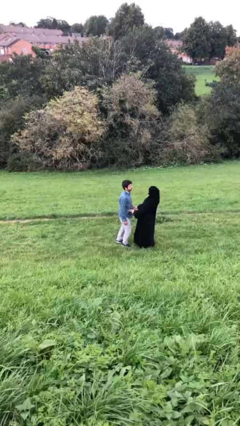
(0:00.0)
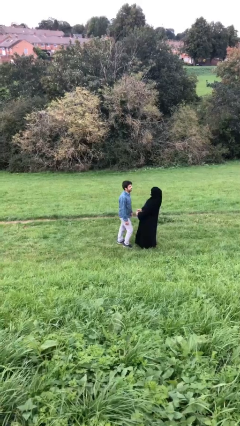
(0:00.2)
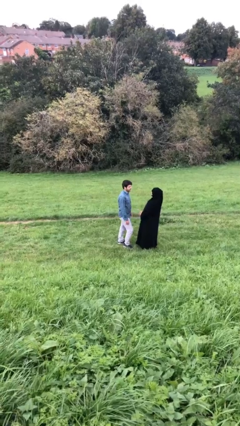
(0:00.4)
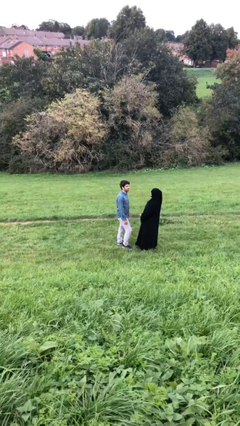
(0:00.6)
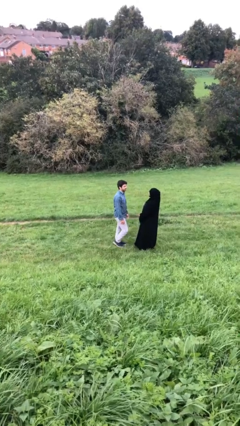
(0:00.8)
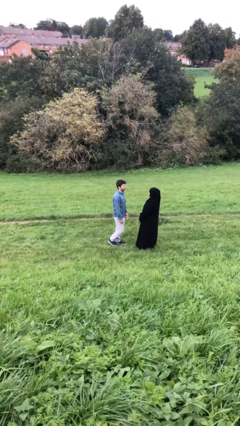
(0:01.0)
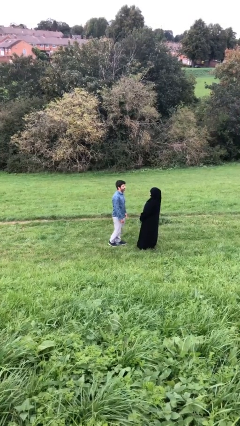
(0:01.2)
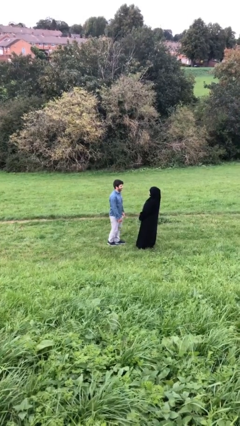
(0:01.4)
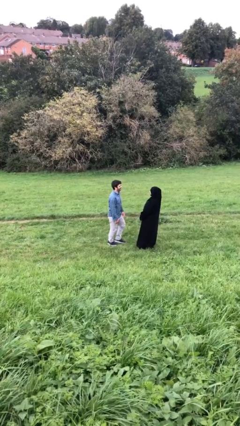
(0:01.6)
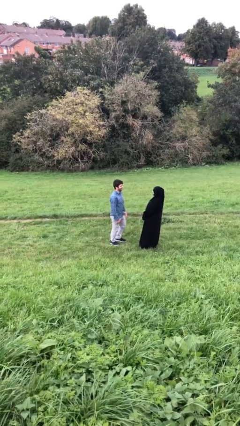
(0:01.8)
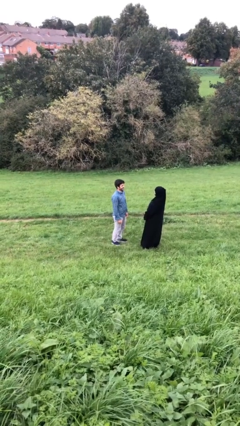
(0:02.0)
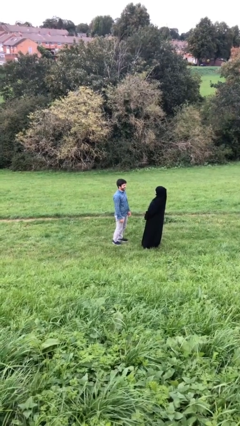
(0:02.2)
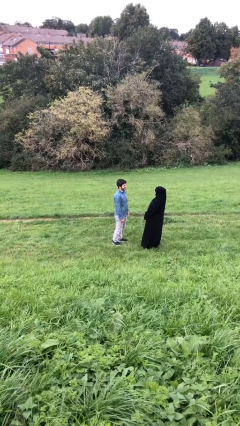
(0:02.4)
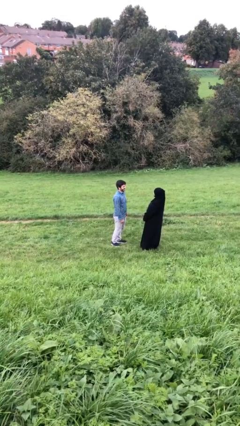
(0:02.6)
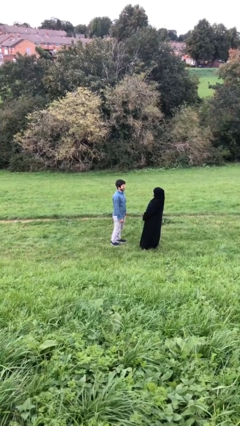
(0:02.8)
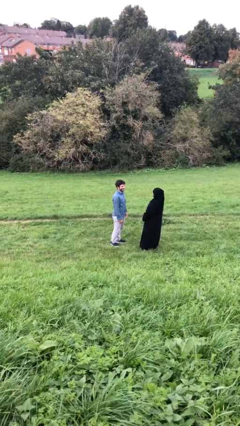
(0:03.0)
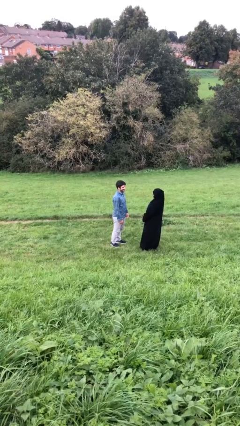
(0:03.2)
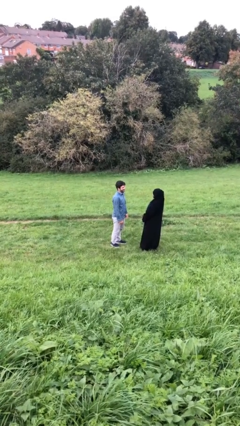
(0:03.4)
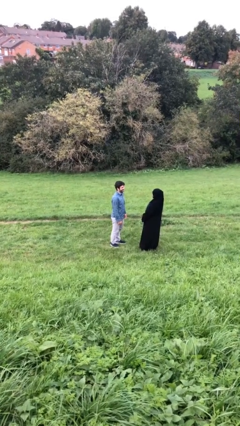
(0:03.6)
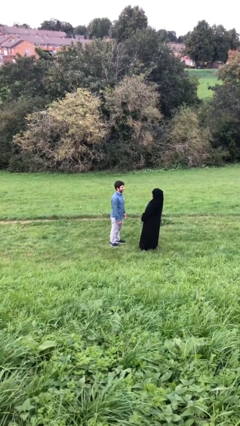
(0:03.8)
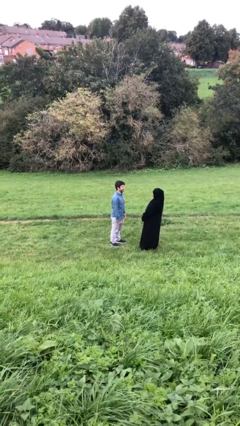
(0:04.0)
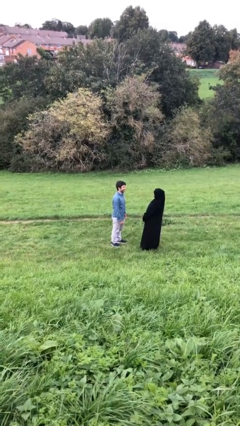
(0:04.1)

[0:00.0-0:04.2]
person talks to person

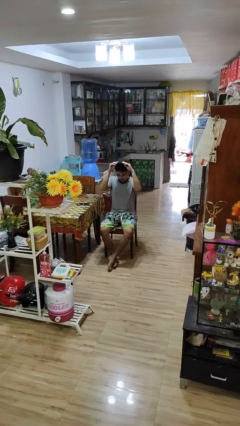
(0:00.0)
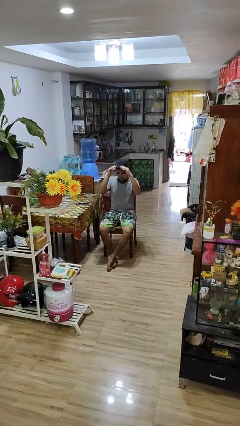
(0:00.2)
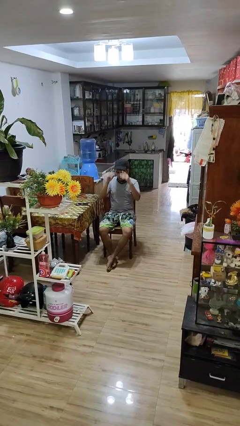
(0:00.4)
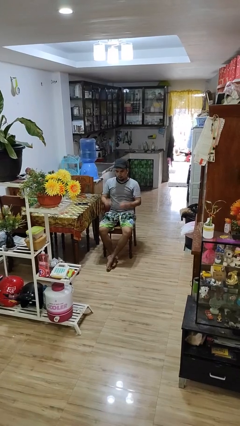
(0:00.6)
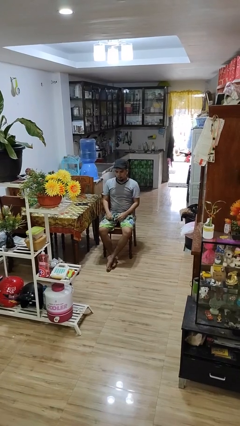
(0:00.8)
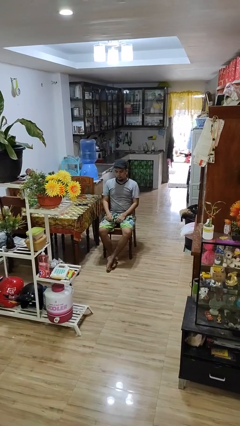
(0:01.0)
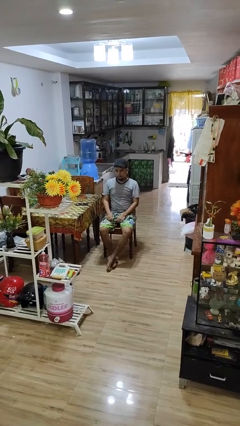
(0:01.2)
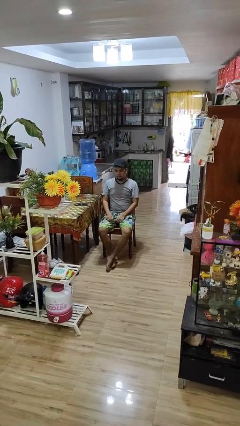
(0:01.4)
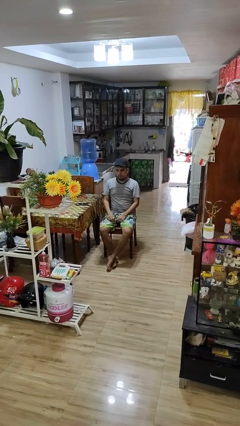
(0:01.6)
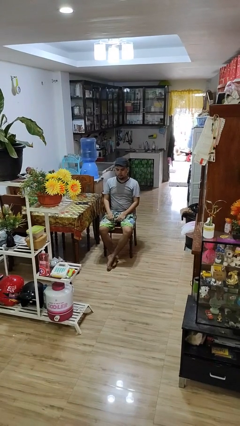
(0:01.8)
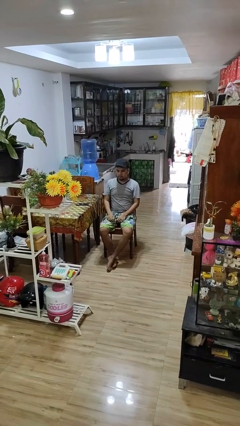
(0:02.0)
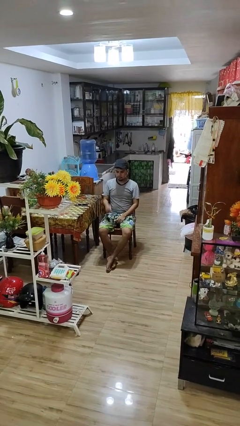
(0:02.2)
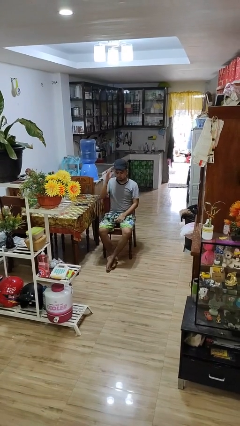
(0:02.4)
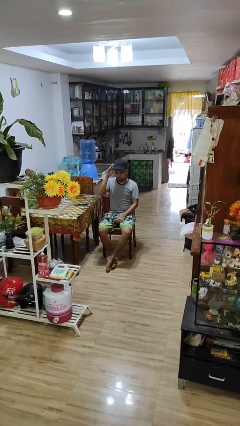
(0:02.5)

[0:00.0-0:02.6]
person puts on hat

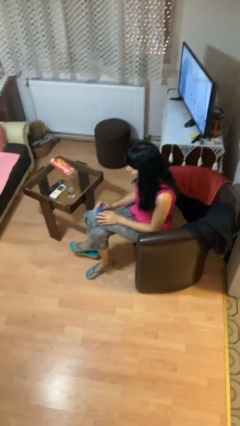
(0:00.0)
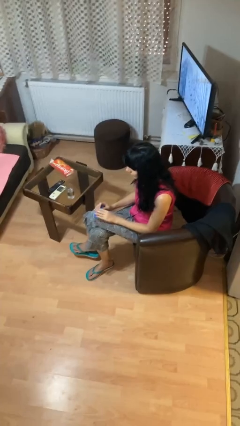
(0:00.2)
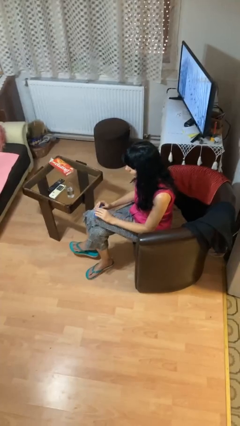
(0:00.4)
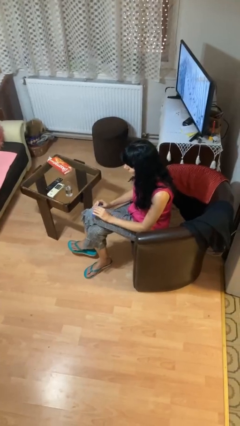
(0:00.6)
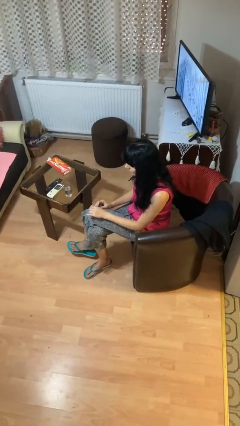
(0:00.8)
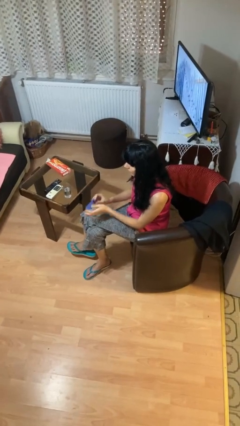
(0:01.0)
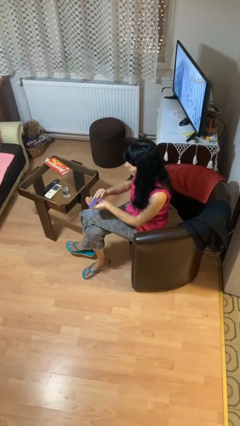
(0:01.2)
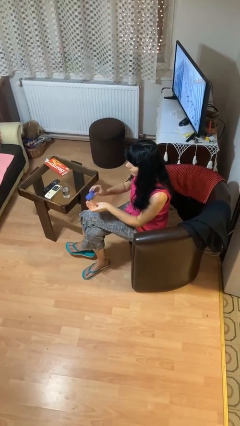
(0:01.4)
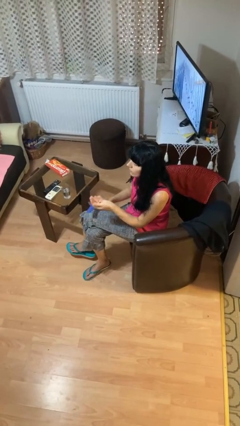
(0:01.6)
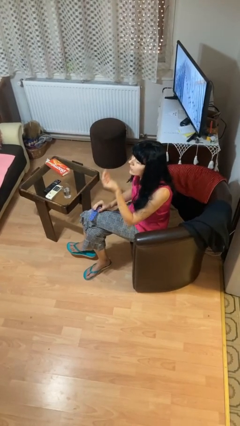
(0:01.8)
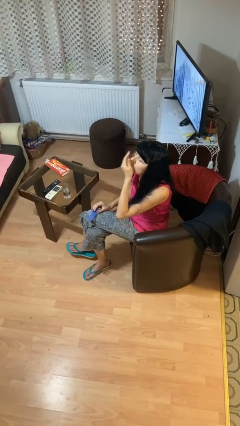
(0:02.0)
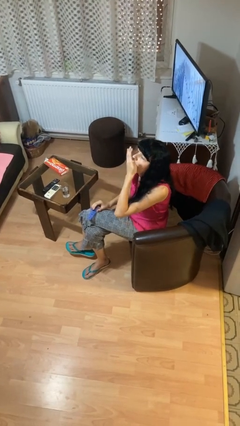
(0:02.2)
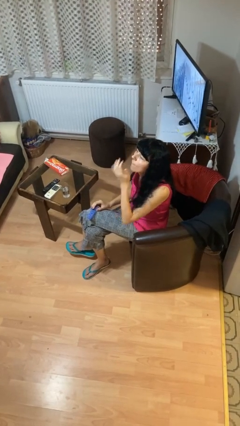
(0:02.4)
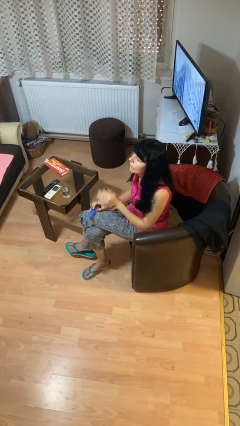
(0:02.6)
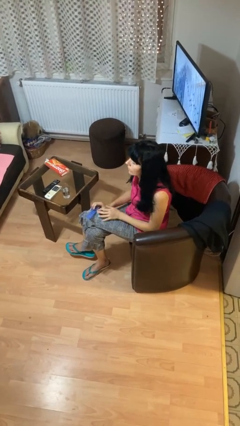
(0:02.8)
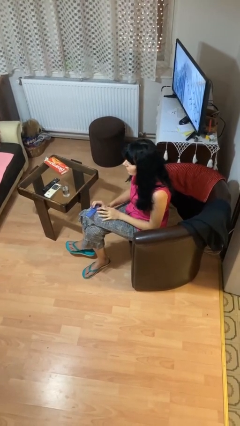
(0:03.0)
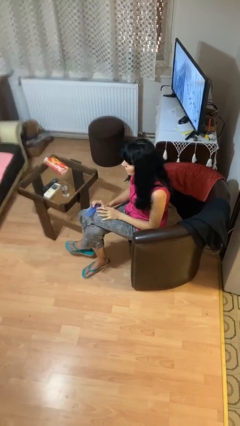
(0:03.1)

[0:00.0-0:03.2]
person takes medicine pills

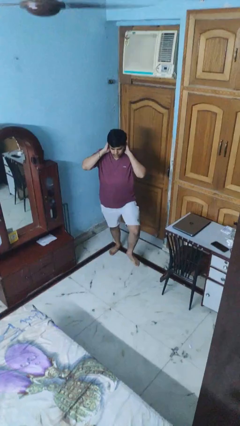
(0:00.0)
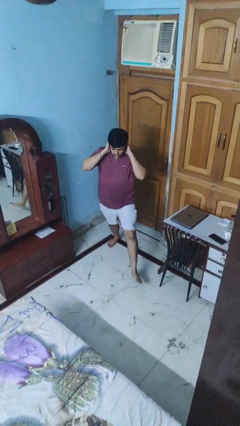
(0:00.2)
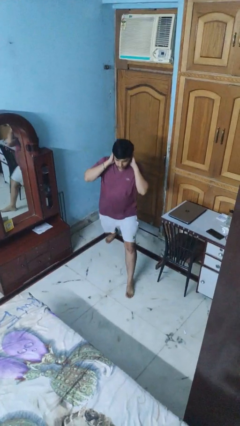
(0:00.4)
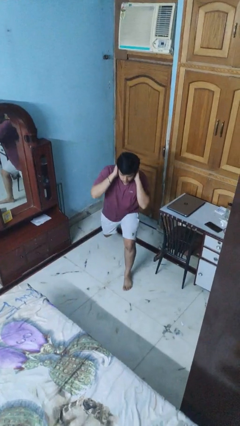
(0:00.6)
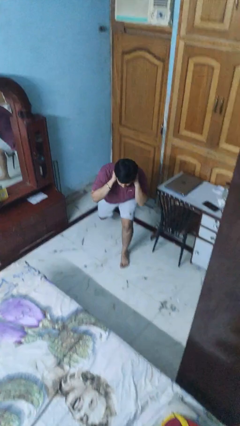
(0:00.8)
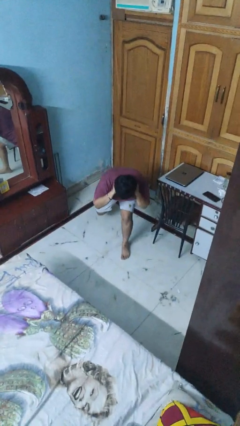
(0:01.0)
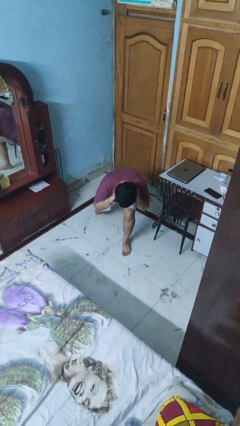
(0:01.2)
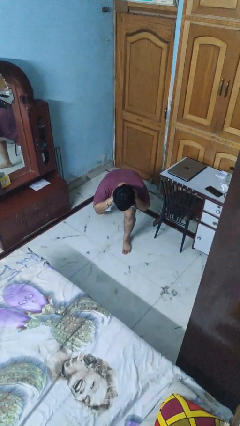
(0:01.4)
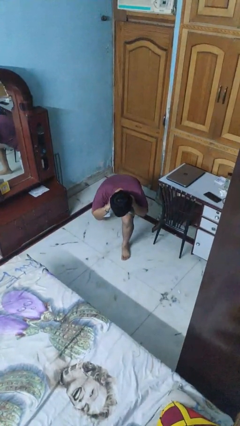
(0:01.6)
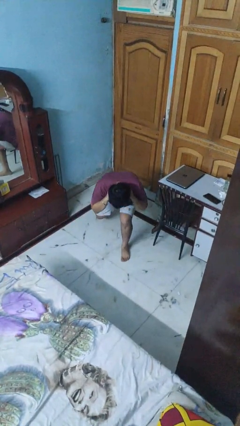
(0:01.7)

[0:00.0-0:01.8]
person exercises with lunges

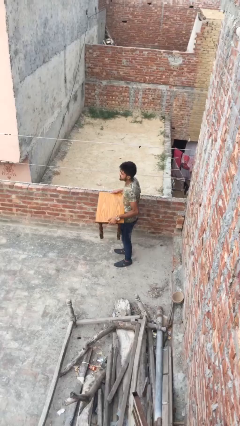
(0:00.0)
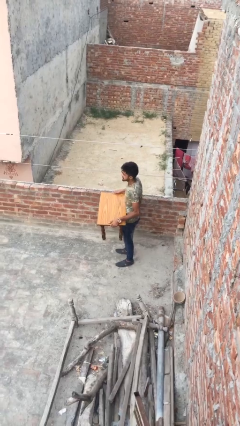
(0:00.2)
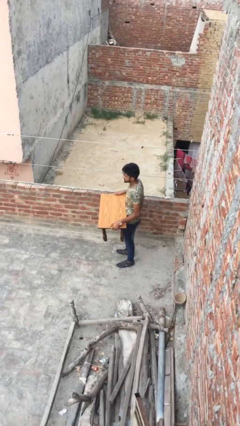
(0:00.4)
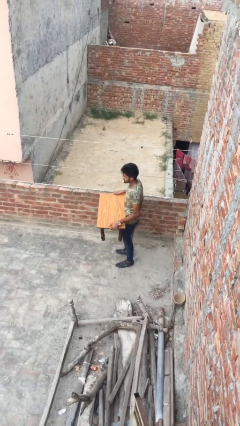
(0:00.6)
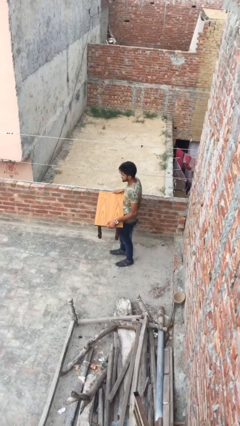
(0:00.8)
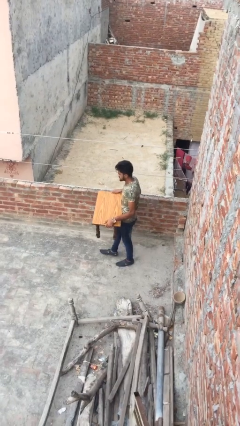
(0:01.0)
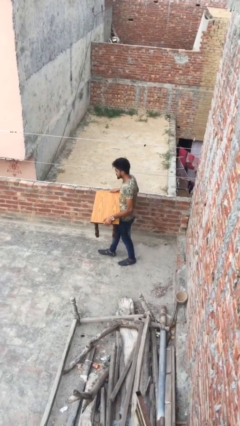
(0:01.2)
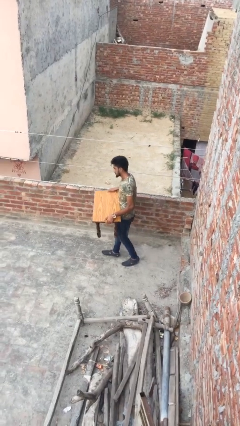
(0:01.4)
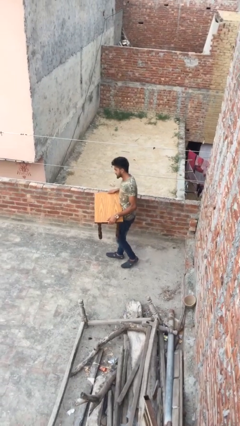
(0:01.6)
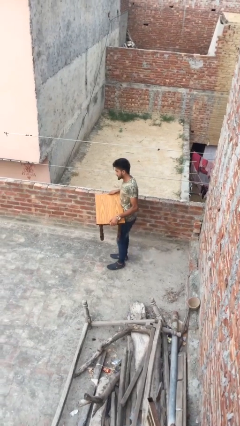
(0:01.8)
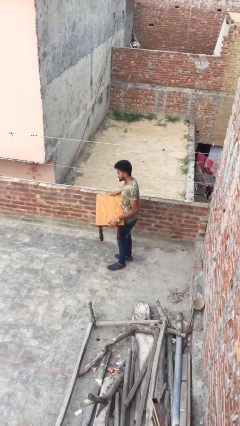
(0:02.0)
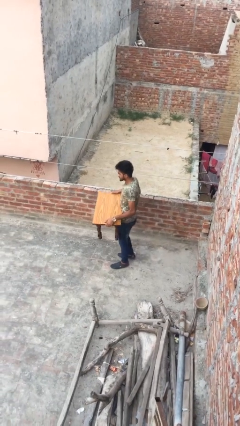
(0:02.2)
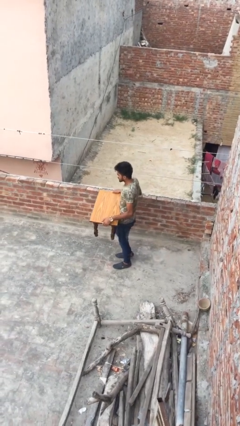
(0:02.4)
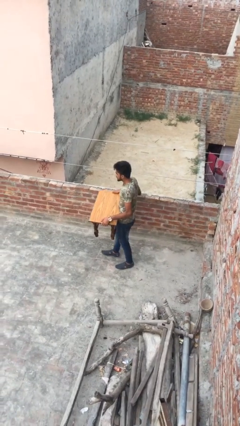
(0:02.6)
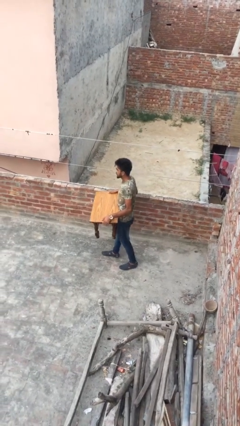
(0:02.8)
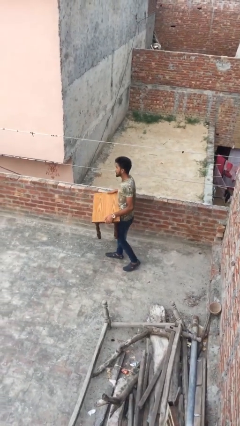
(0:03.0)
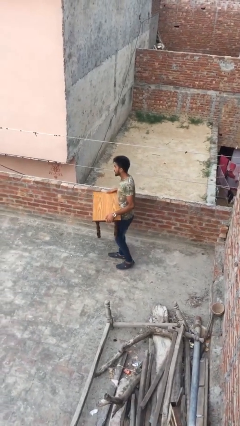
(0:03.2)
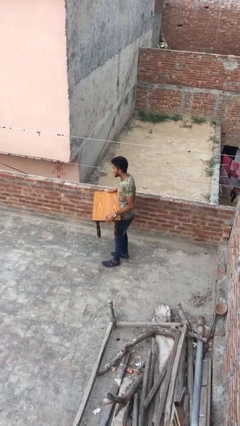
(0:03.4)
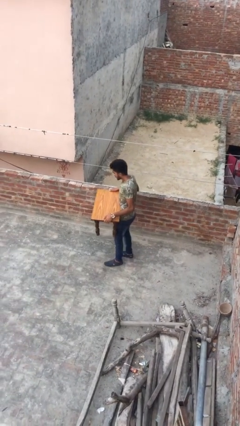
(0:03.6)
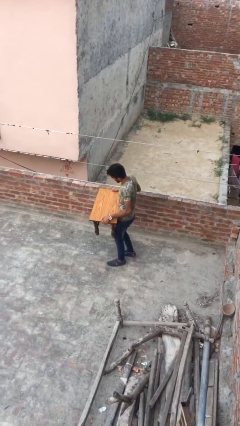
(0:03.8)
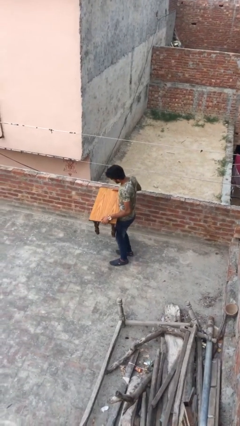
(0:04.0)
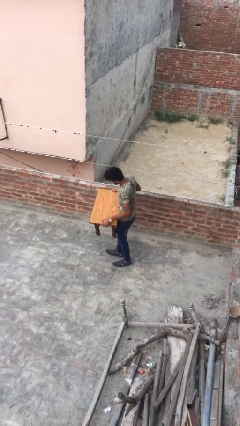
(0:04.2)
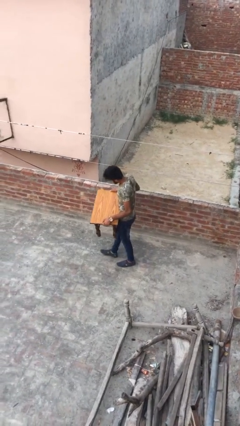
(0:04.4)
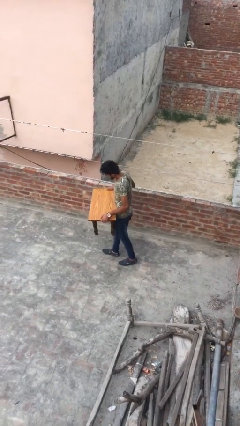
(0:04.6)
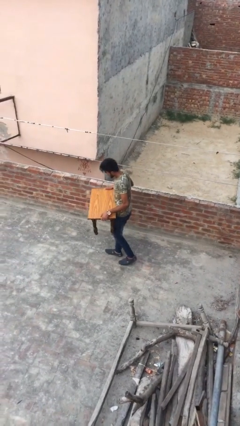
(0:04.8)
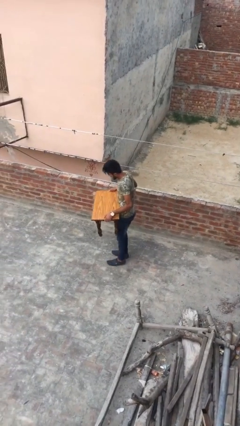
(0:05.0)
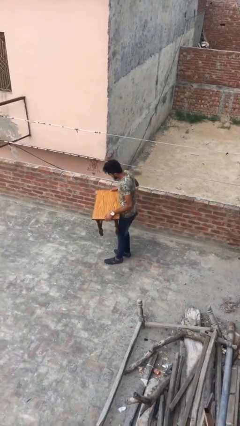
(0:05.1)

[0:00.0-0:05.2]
person carries heavy object

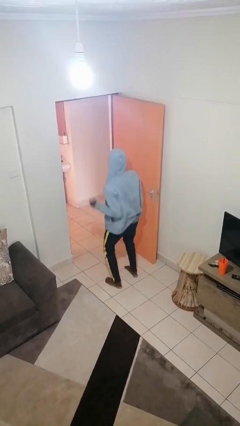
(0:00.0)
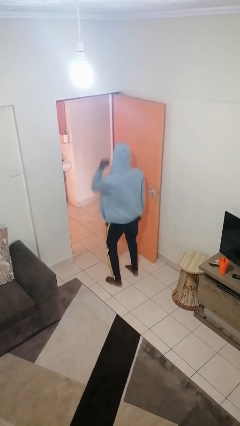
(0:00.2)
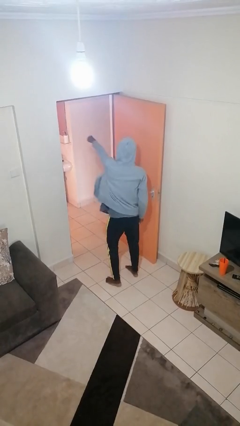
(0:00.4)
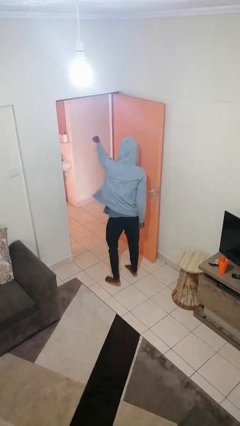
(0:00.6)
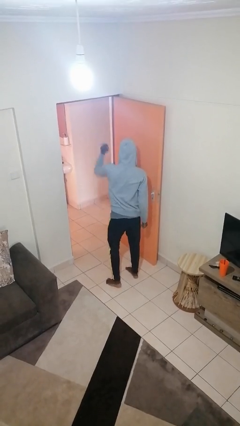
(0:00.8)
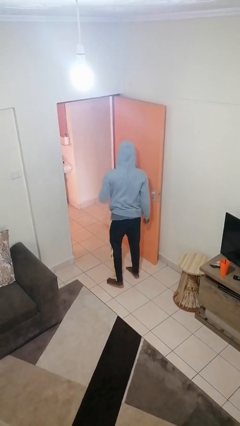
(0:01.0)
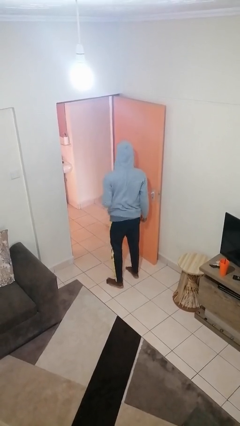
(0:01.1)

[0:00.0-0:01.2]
person punches
